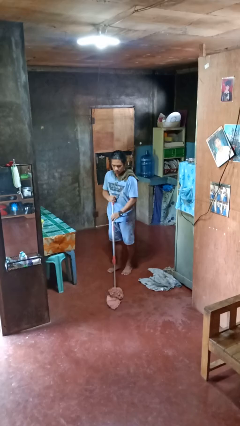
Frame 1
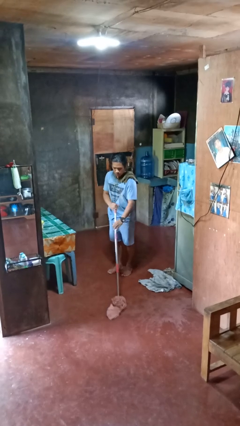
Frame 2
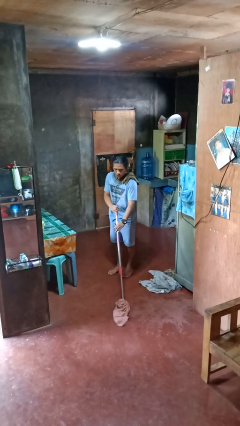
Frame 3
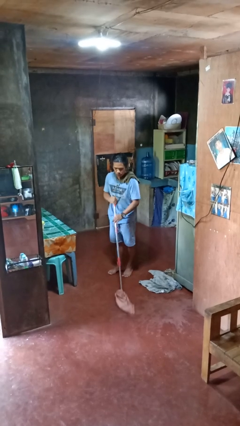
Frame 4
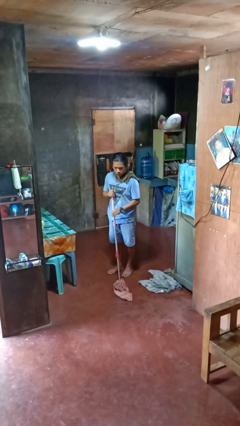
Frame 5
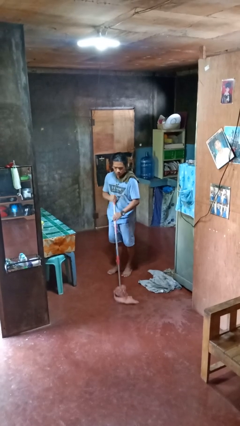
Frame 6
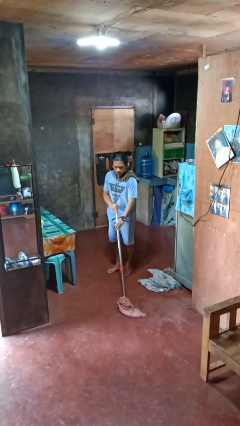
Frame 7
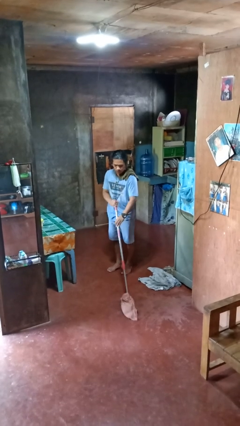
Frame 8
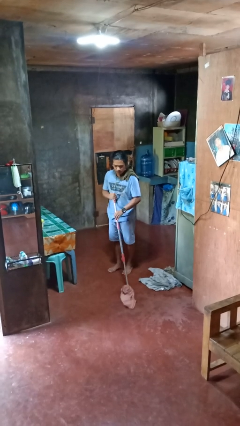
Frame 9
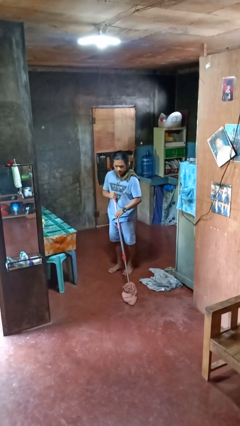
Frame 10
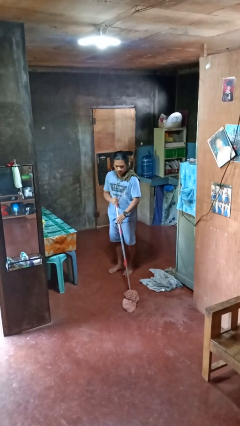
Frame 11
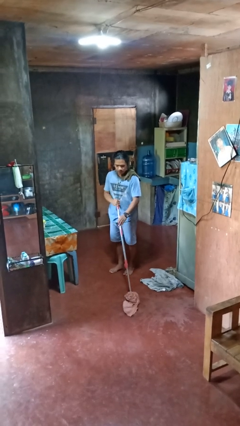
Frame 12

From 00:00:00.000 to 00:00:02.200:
person mops

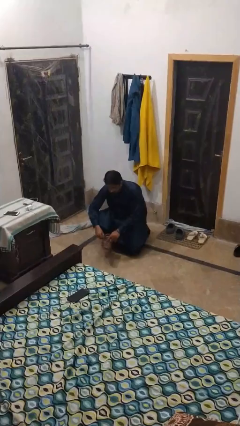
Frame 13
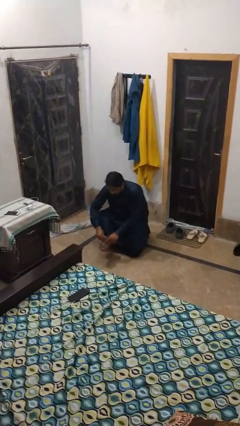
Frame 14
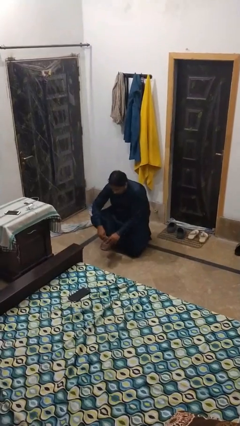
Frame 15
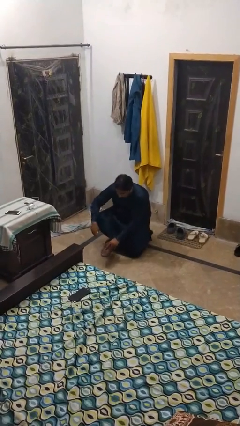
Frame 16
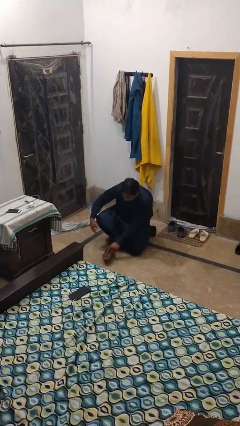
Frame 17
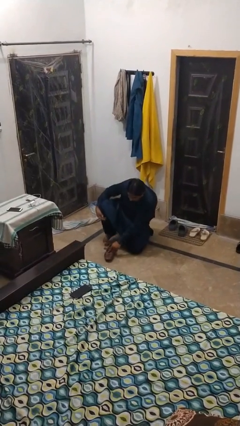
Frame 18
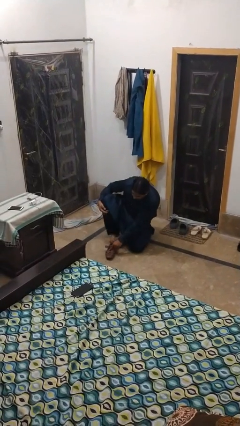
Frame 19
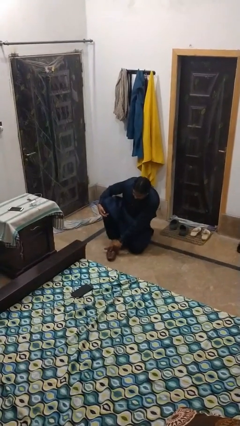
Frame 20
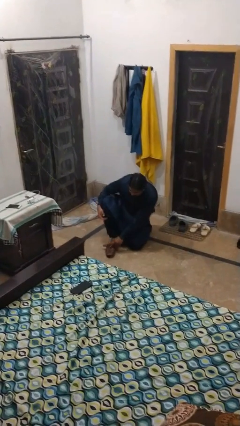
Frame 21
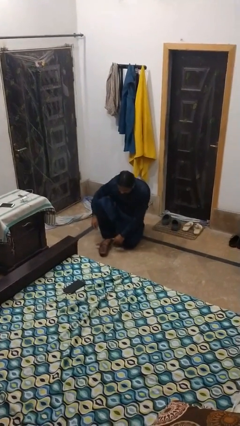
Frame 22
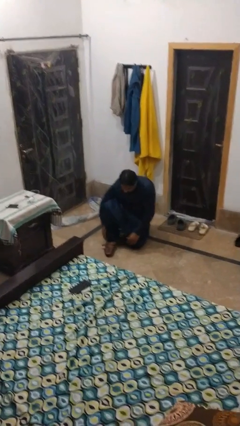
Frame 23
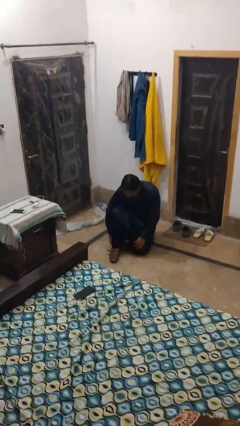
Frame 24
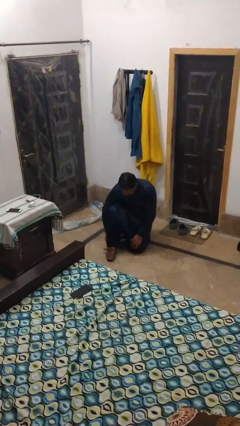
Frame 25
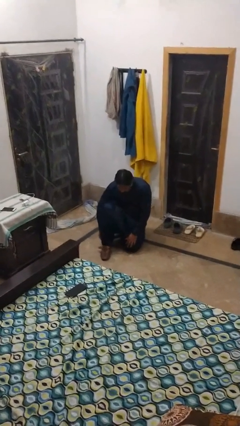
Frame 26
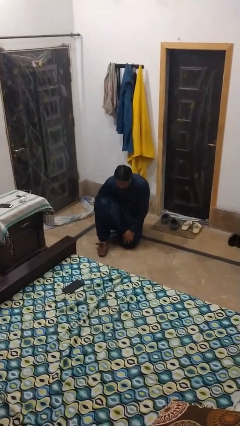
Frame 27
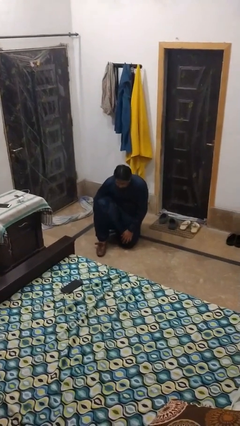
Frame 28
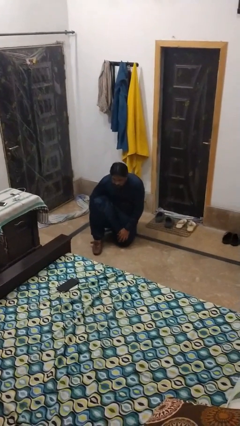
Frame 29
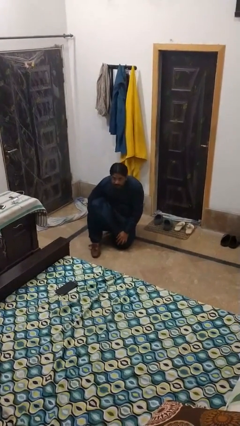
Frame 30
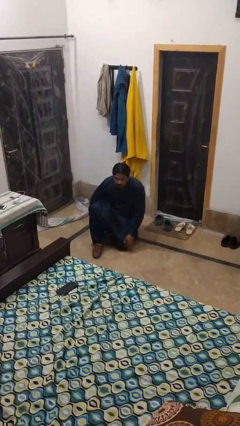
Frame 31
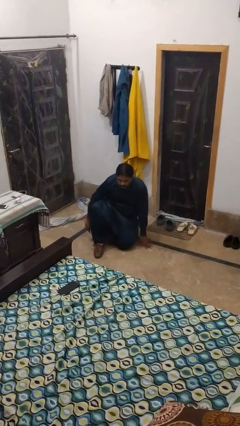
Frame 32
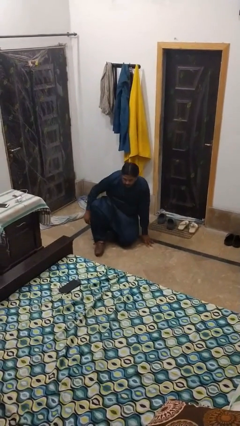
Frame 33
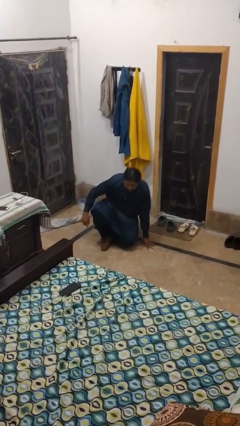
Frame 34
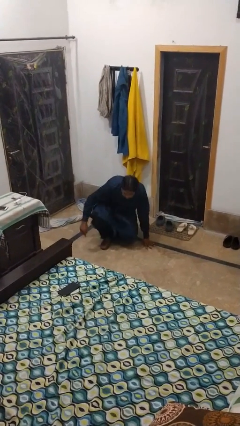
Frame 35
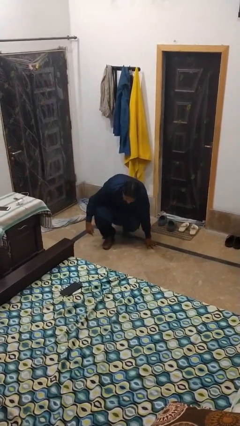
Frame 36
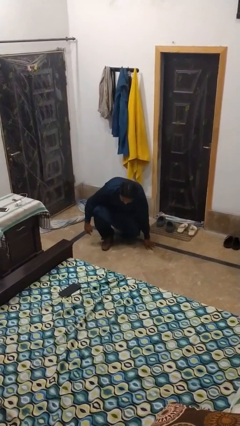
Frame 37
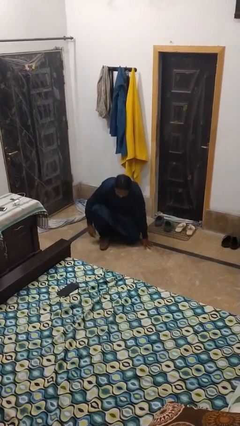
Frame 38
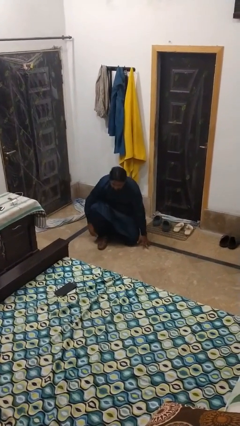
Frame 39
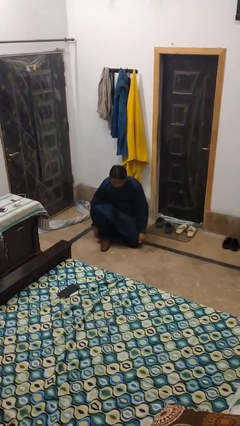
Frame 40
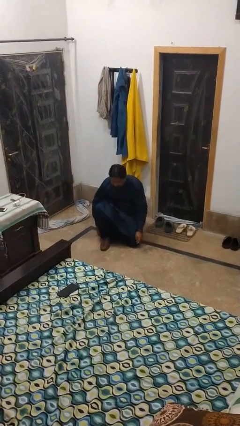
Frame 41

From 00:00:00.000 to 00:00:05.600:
person puts on shoes

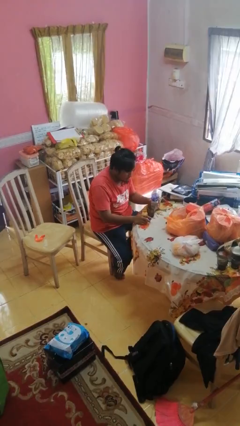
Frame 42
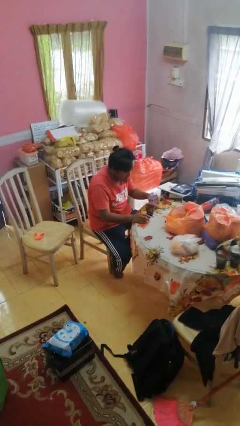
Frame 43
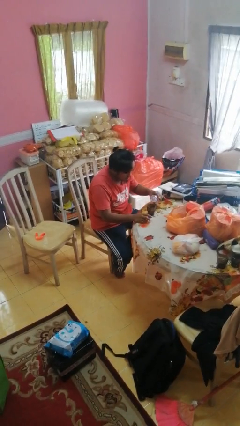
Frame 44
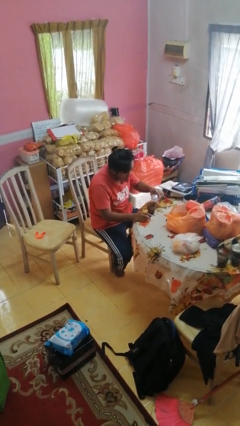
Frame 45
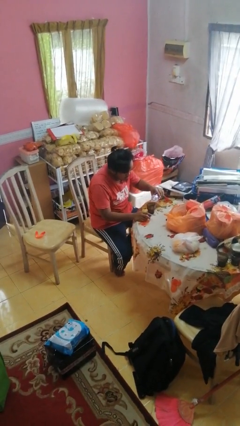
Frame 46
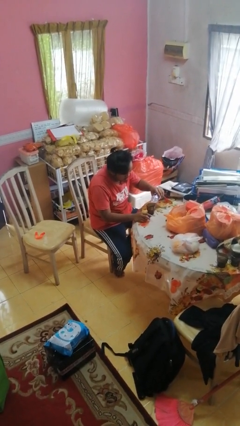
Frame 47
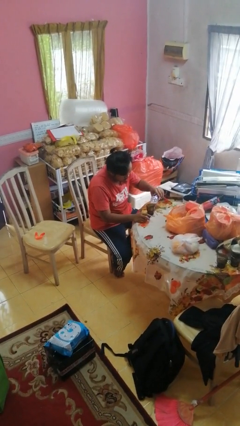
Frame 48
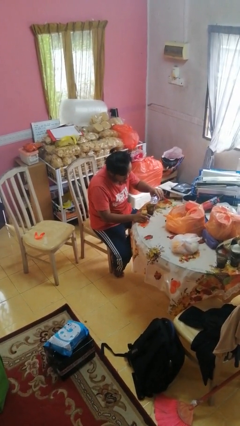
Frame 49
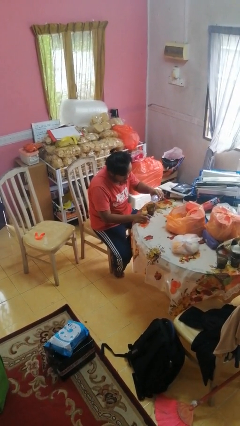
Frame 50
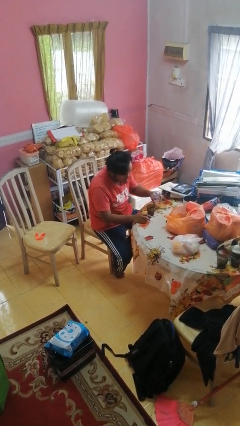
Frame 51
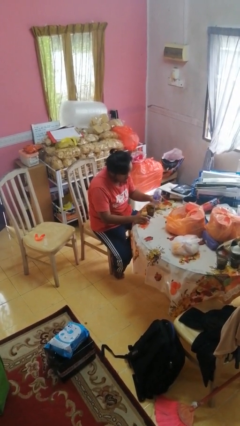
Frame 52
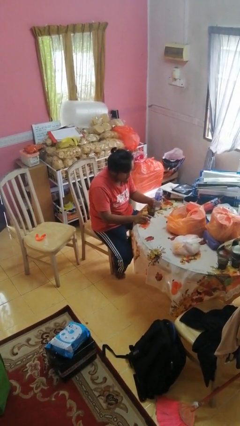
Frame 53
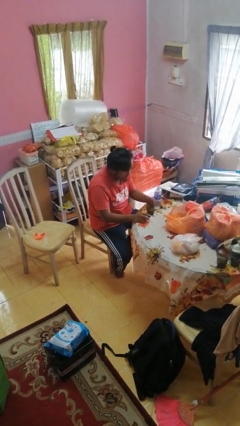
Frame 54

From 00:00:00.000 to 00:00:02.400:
person pours liquid into cup

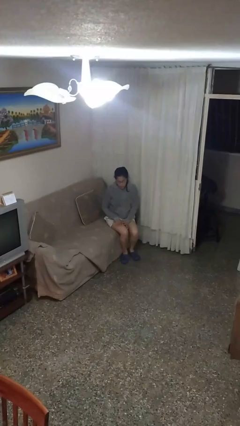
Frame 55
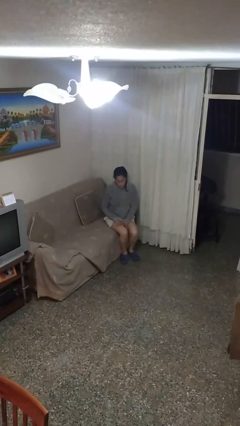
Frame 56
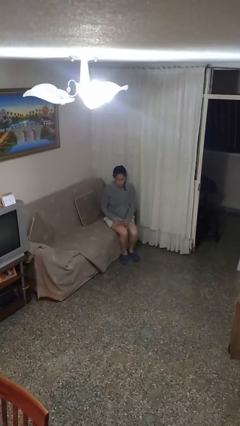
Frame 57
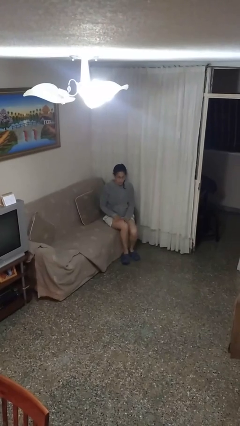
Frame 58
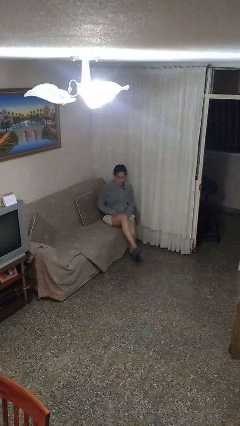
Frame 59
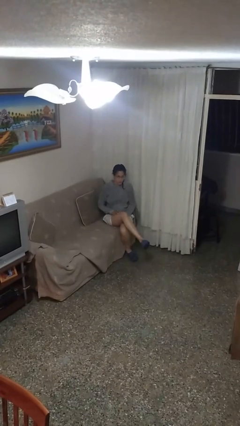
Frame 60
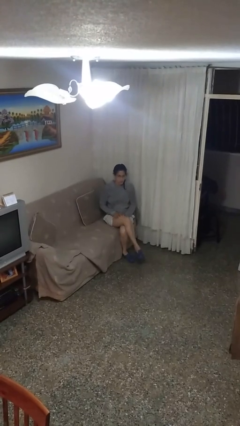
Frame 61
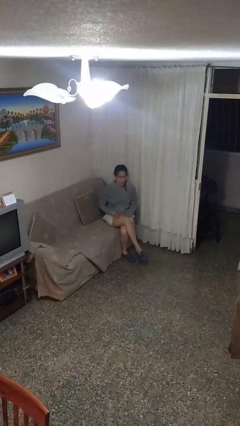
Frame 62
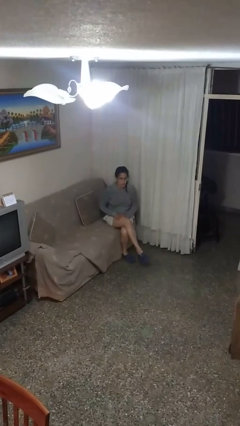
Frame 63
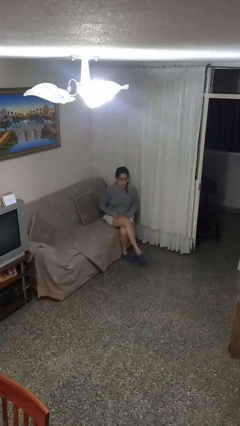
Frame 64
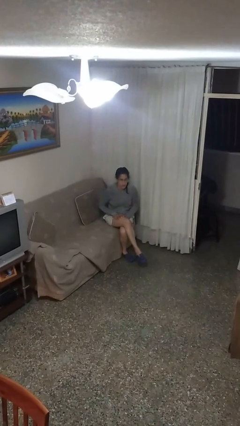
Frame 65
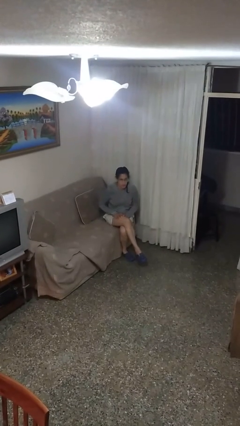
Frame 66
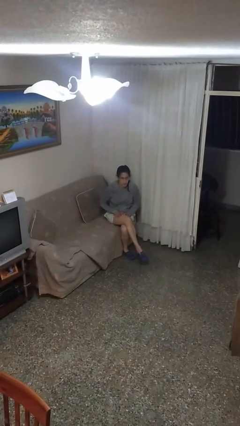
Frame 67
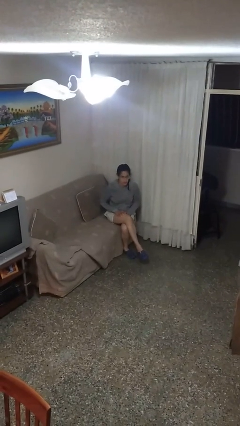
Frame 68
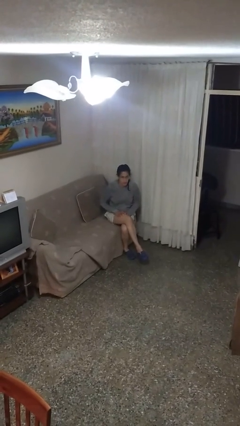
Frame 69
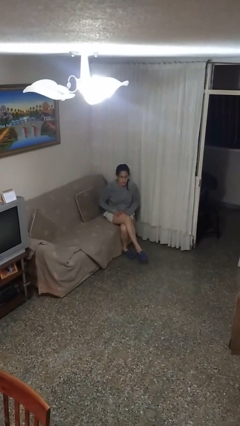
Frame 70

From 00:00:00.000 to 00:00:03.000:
person crosses legs

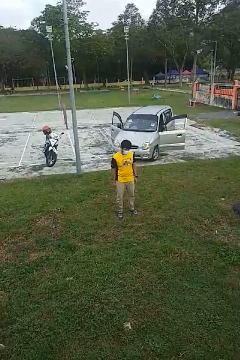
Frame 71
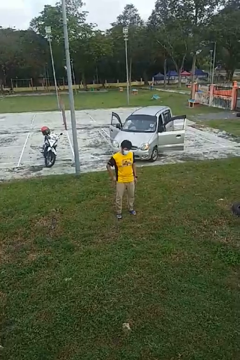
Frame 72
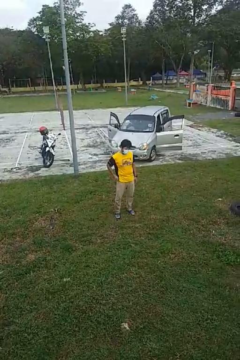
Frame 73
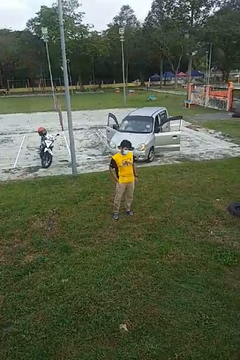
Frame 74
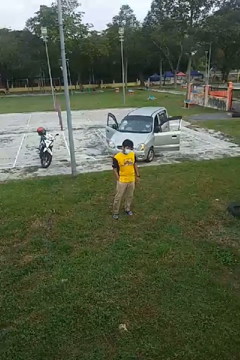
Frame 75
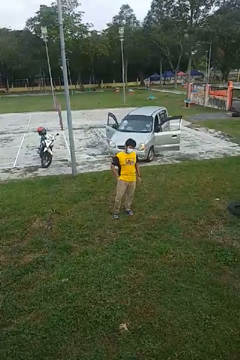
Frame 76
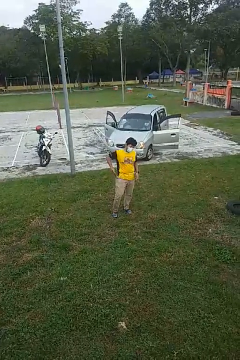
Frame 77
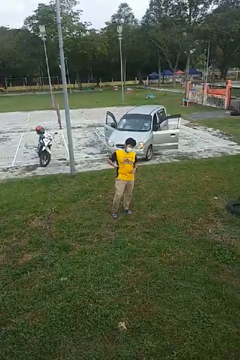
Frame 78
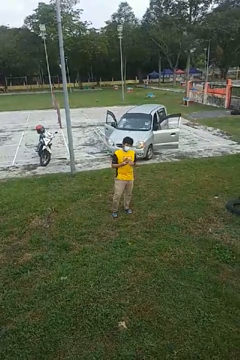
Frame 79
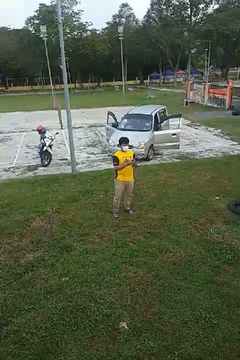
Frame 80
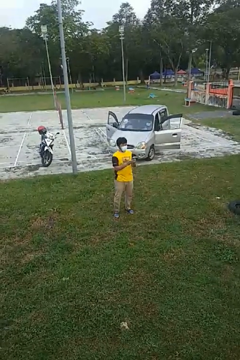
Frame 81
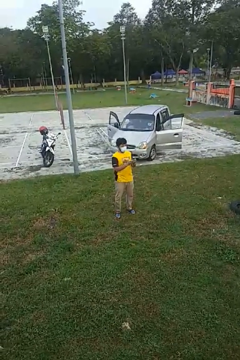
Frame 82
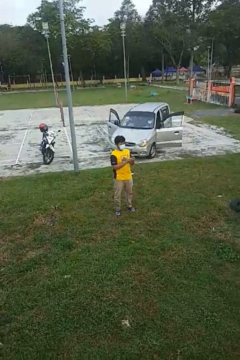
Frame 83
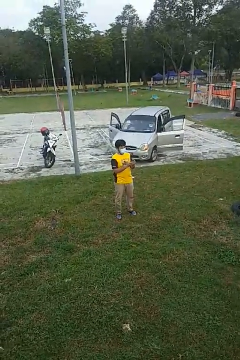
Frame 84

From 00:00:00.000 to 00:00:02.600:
person takes phone from pocket

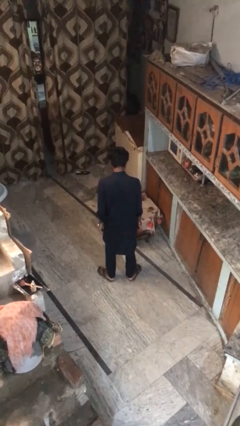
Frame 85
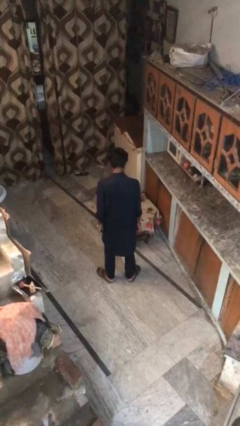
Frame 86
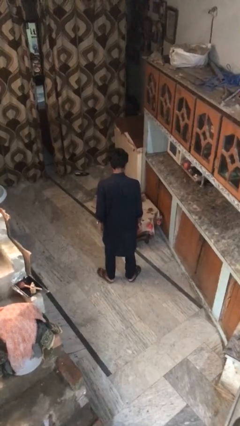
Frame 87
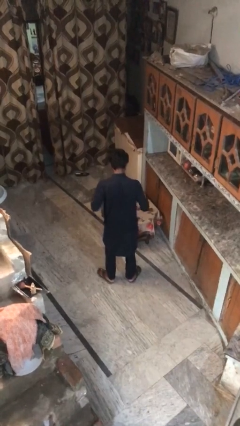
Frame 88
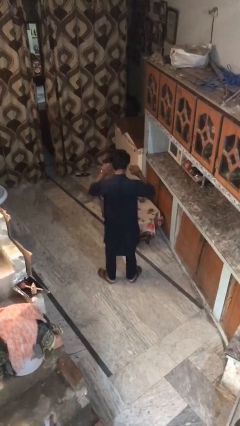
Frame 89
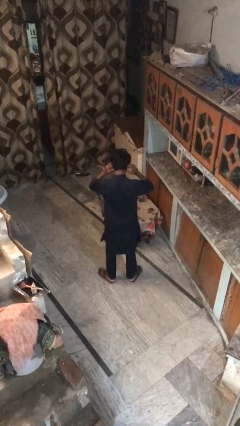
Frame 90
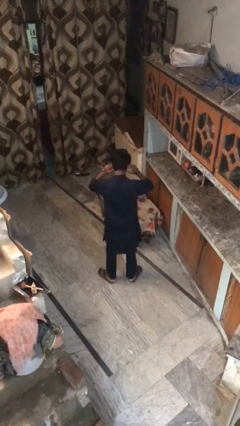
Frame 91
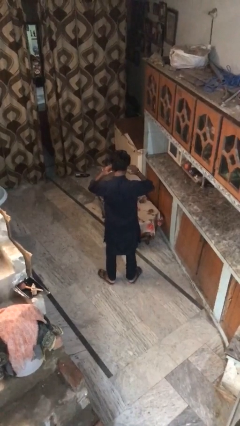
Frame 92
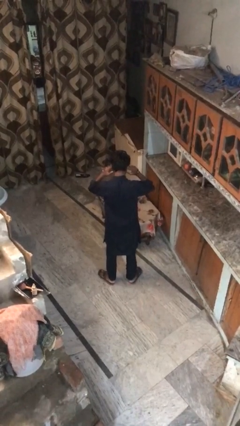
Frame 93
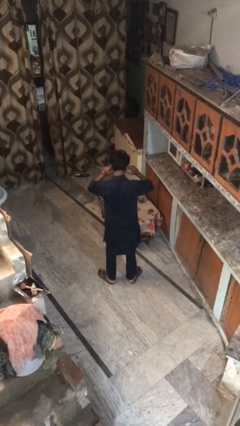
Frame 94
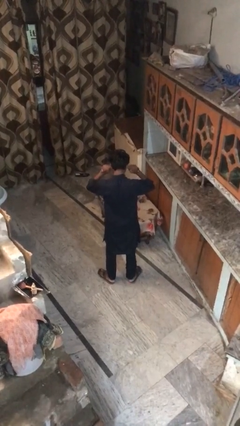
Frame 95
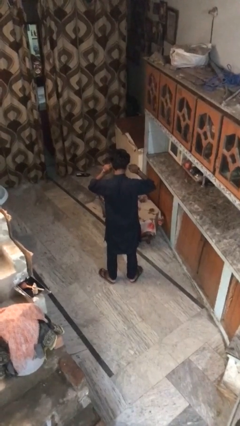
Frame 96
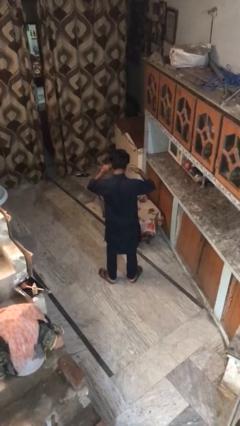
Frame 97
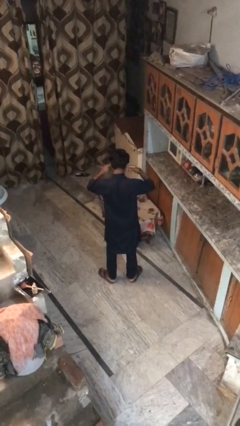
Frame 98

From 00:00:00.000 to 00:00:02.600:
person puts fingers in ear
